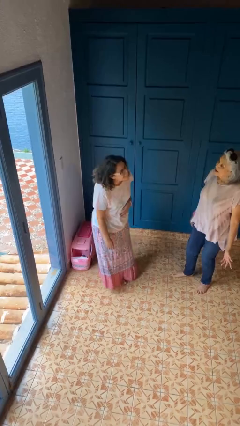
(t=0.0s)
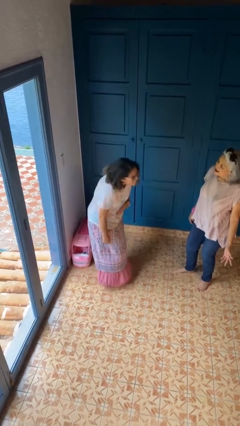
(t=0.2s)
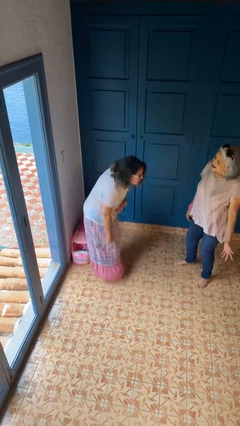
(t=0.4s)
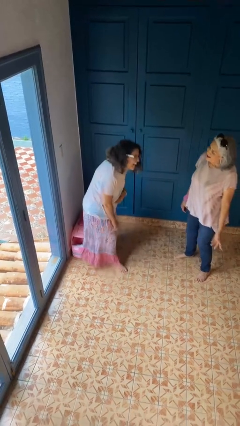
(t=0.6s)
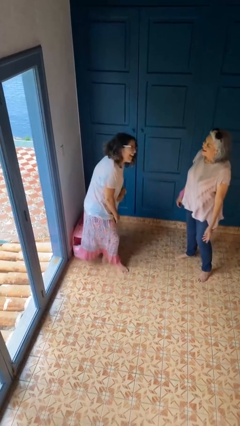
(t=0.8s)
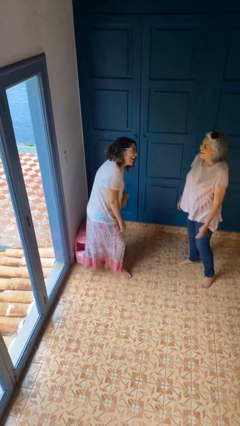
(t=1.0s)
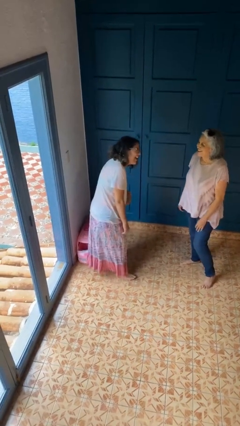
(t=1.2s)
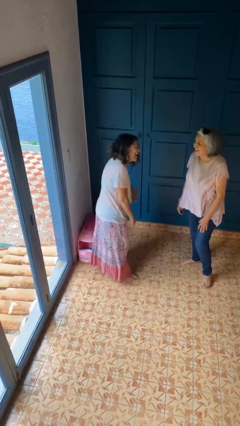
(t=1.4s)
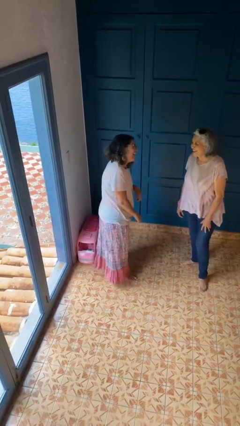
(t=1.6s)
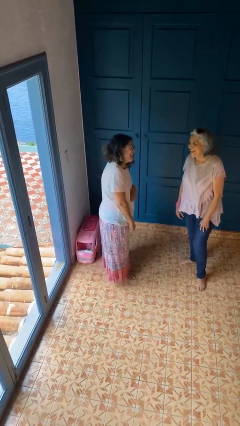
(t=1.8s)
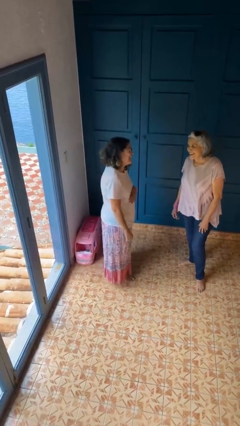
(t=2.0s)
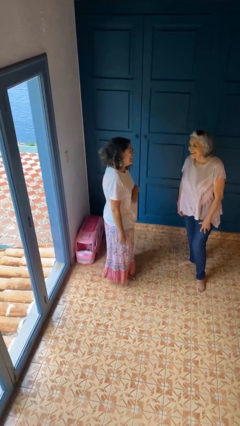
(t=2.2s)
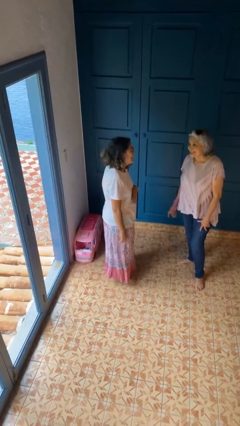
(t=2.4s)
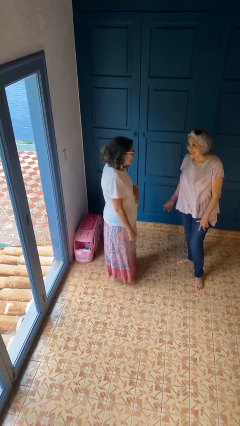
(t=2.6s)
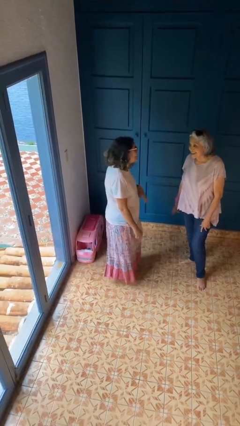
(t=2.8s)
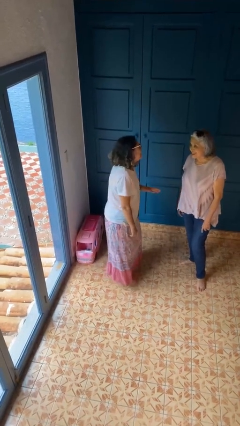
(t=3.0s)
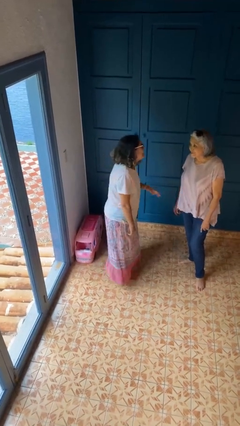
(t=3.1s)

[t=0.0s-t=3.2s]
person laughs with person

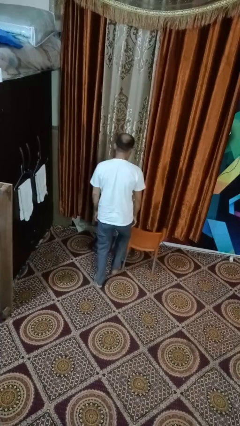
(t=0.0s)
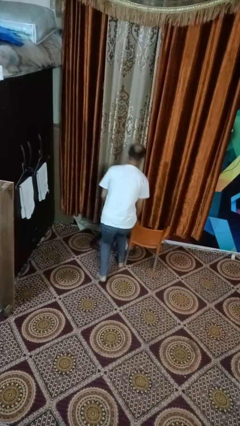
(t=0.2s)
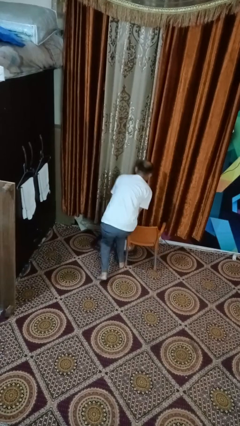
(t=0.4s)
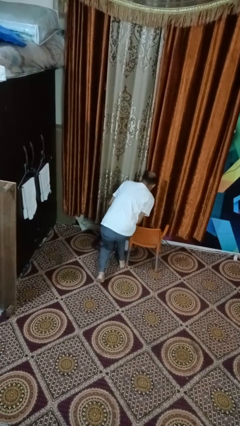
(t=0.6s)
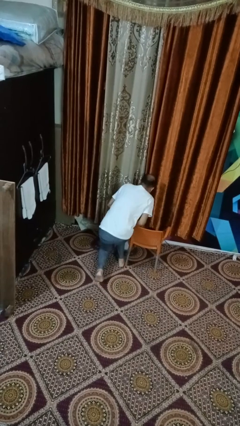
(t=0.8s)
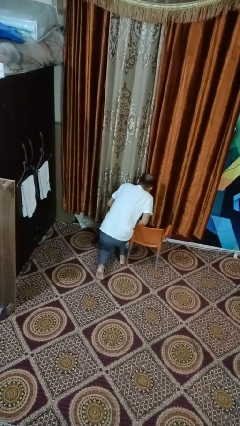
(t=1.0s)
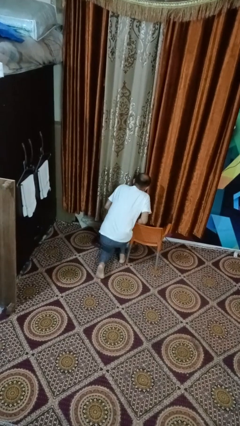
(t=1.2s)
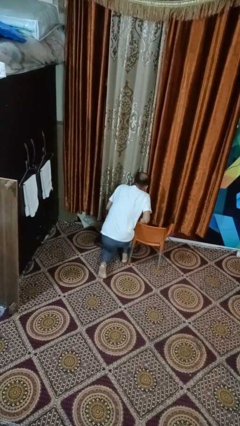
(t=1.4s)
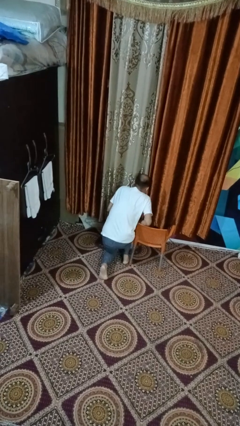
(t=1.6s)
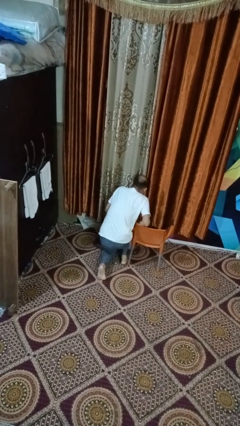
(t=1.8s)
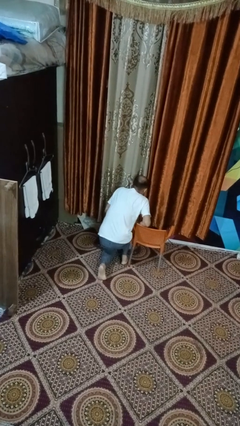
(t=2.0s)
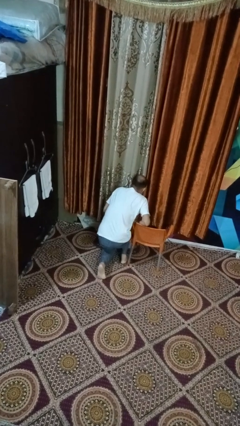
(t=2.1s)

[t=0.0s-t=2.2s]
person trips on object on floor

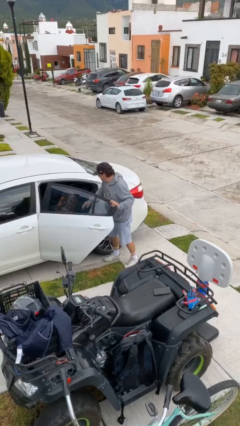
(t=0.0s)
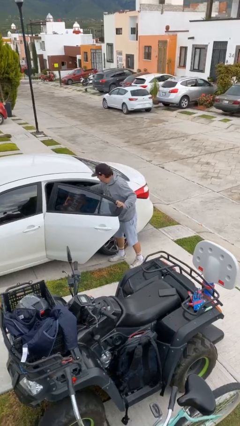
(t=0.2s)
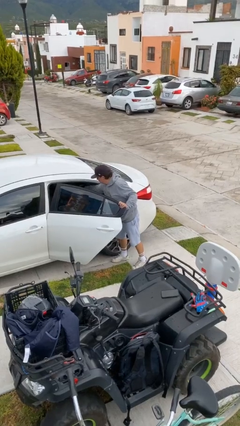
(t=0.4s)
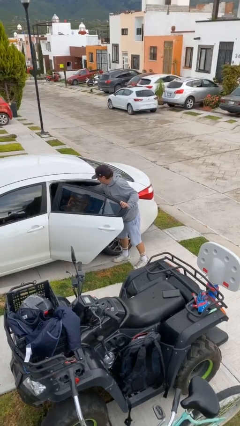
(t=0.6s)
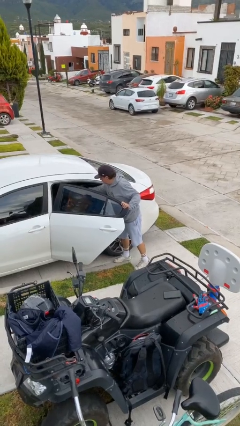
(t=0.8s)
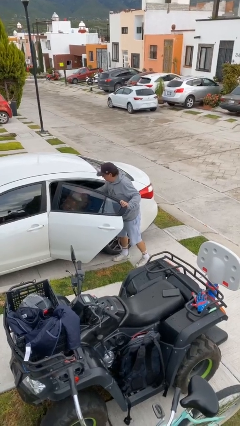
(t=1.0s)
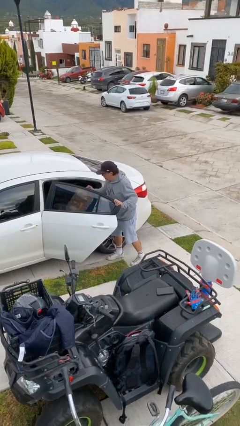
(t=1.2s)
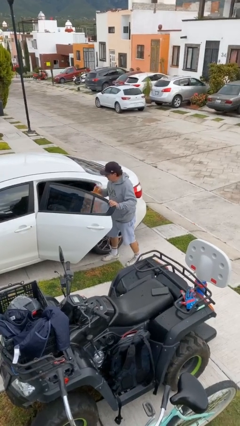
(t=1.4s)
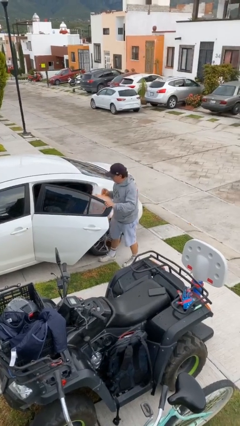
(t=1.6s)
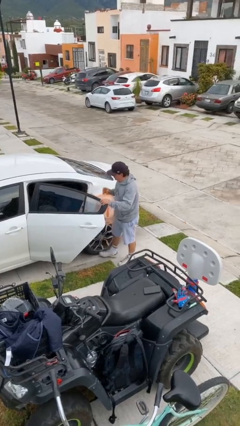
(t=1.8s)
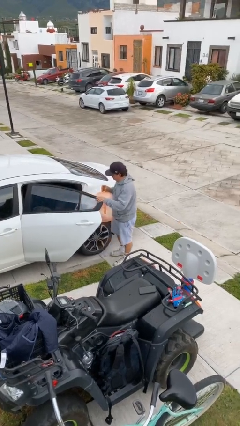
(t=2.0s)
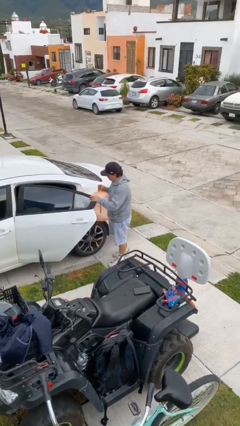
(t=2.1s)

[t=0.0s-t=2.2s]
person unloads car

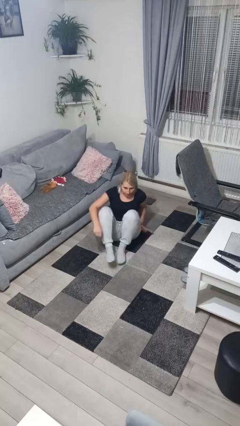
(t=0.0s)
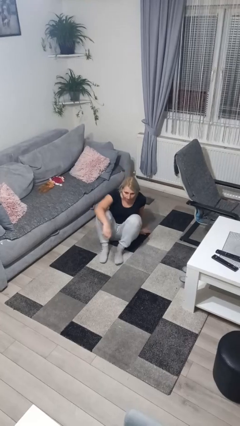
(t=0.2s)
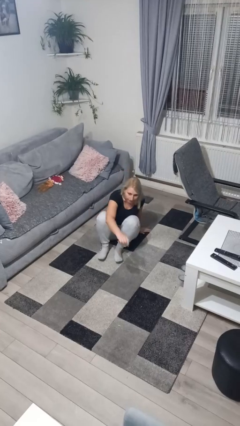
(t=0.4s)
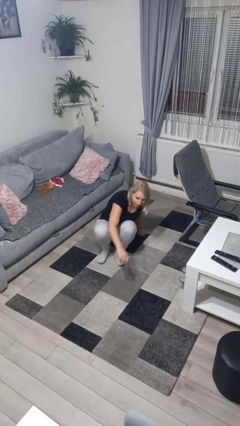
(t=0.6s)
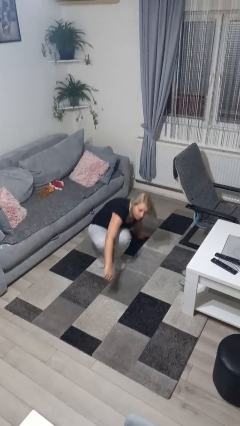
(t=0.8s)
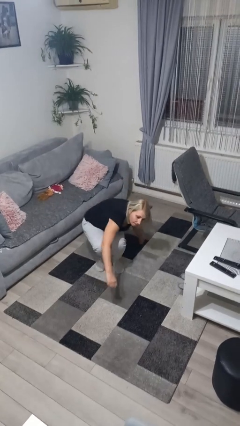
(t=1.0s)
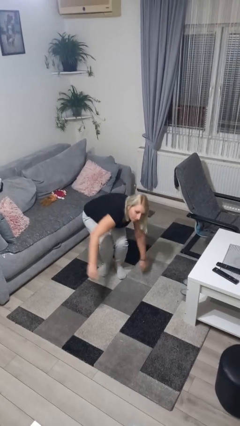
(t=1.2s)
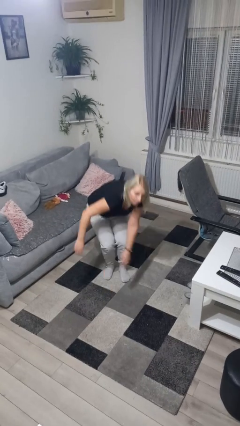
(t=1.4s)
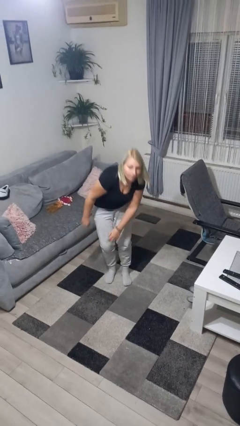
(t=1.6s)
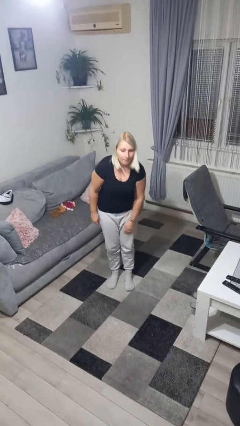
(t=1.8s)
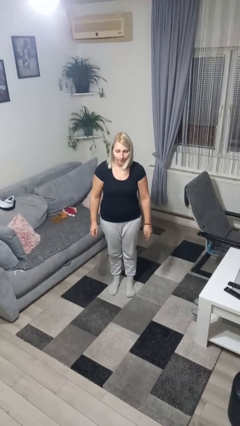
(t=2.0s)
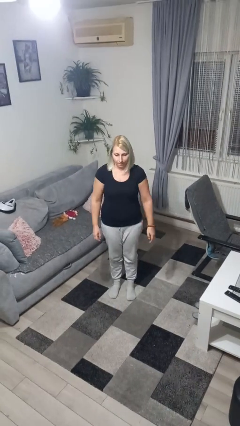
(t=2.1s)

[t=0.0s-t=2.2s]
person stands up from floor

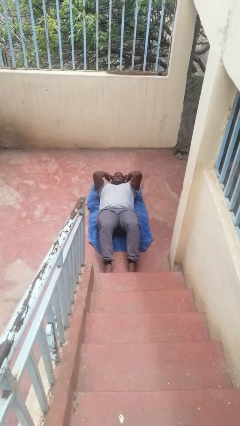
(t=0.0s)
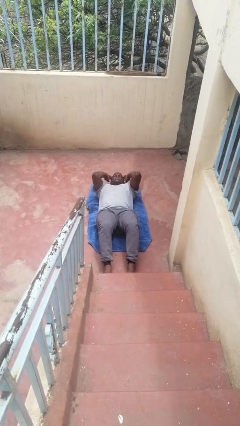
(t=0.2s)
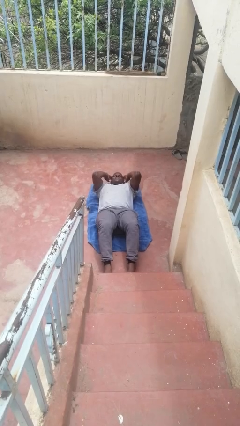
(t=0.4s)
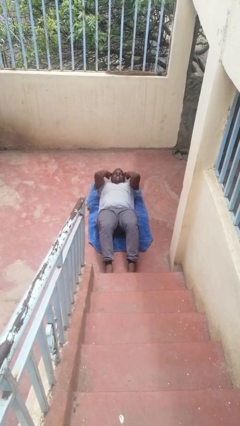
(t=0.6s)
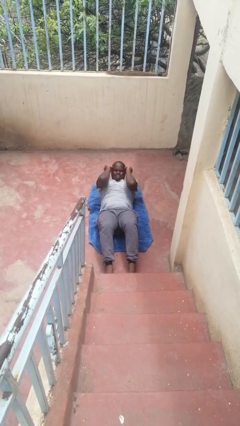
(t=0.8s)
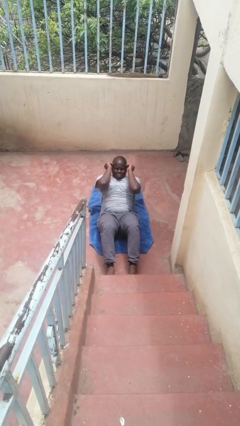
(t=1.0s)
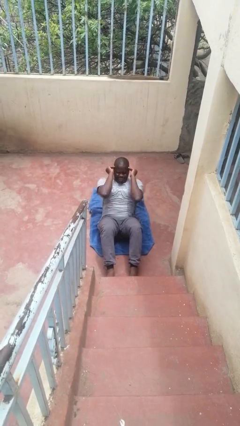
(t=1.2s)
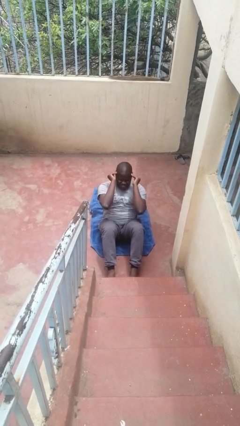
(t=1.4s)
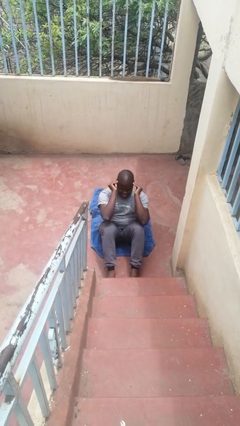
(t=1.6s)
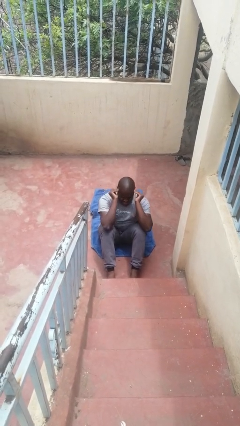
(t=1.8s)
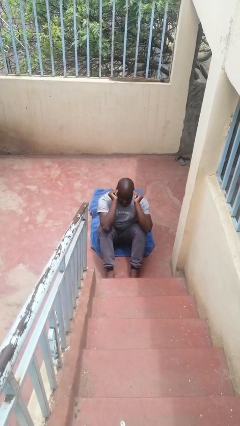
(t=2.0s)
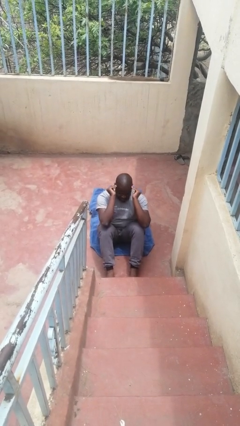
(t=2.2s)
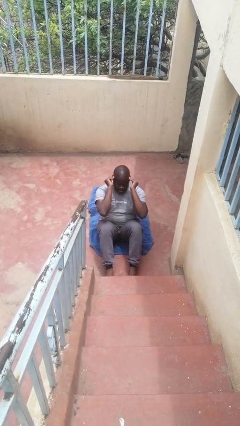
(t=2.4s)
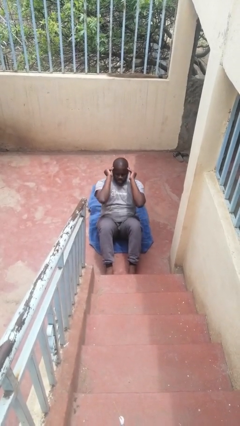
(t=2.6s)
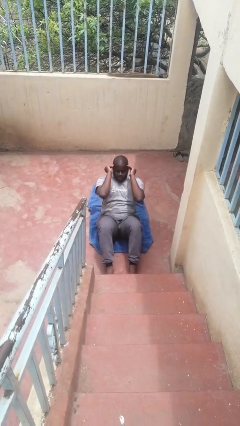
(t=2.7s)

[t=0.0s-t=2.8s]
person exercises with situp

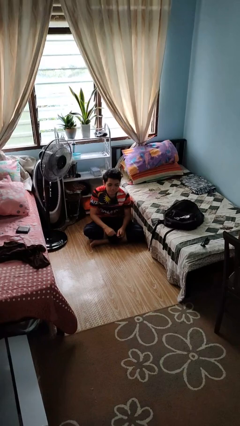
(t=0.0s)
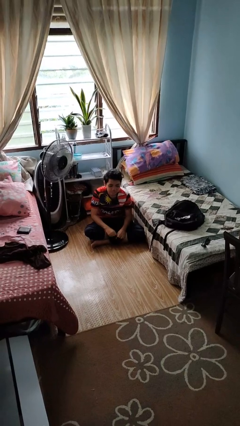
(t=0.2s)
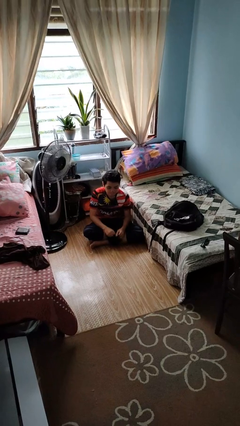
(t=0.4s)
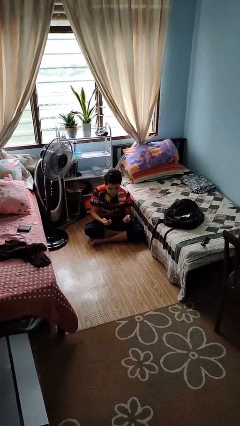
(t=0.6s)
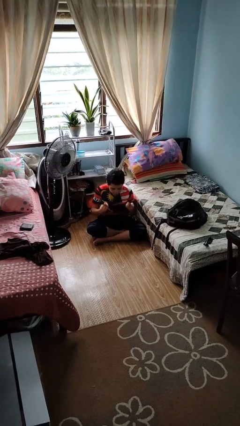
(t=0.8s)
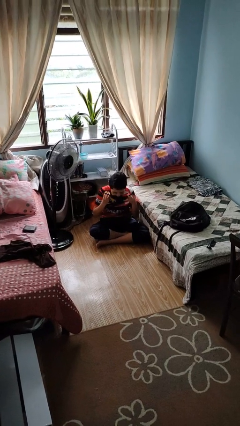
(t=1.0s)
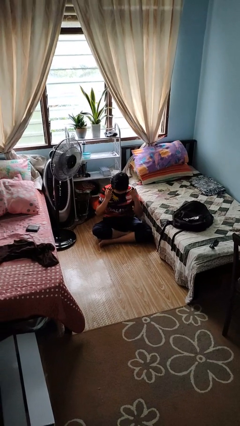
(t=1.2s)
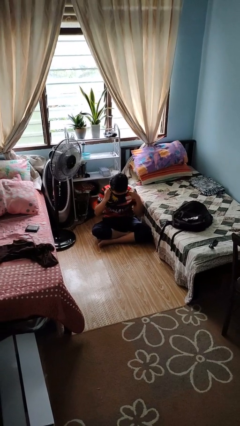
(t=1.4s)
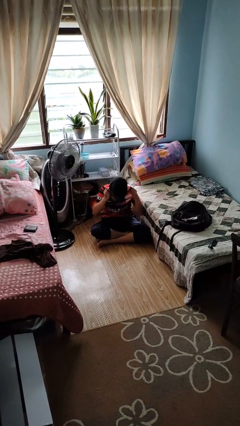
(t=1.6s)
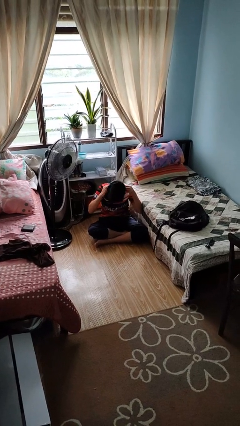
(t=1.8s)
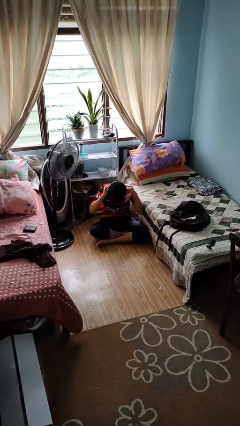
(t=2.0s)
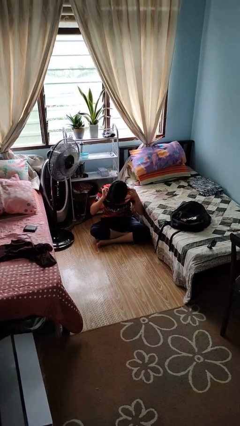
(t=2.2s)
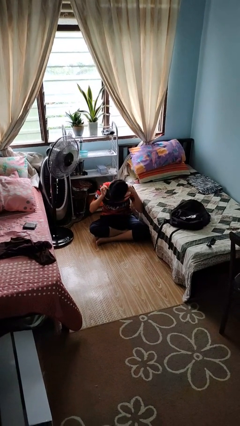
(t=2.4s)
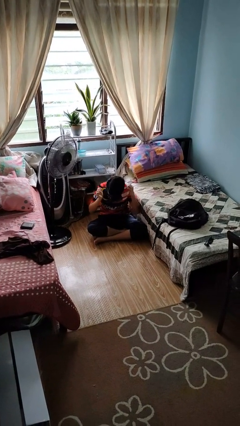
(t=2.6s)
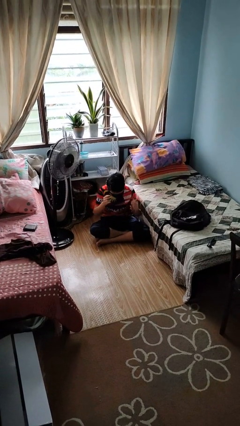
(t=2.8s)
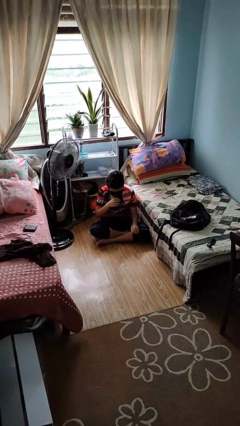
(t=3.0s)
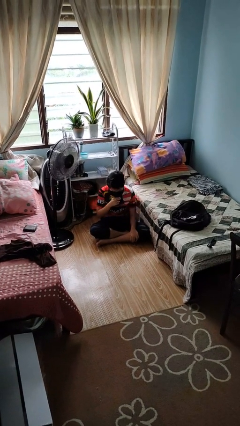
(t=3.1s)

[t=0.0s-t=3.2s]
person puts on facemask

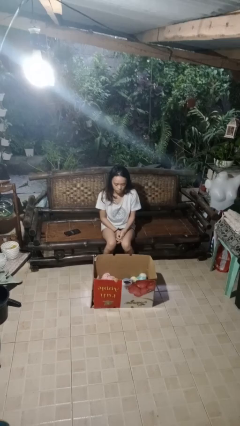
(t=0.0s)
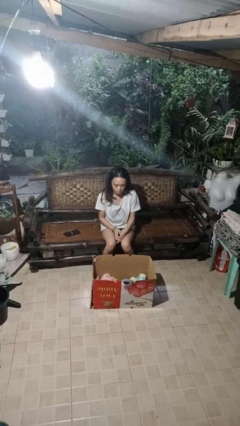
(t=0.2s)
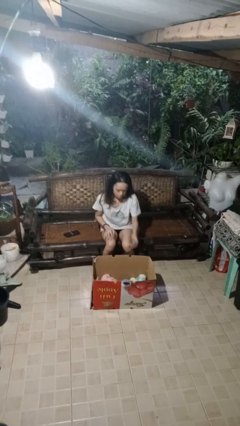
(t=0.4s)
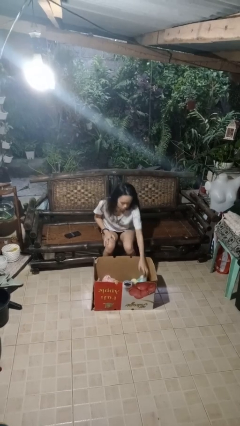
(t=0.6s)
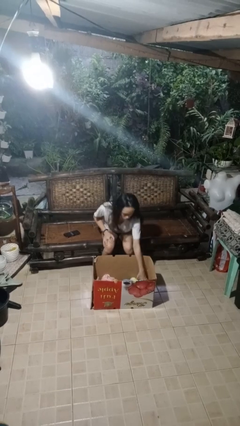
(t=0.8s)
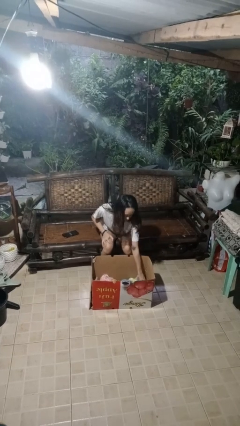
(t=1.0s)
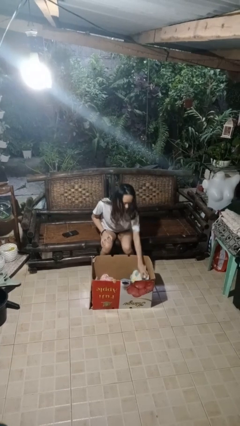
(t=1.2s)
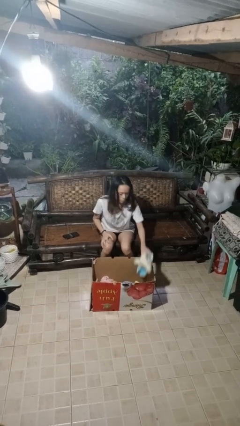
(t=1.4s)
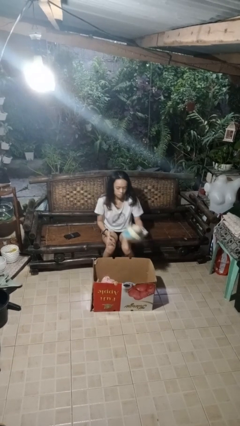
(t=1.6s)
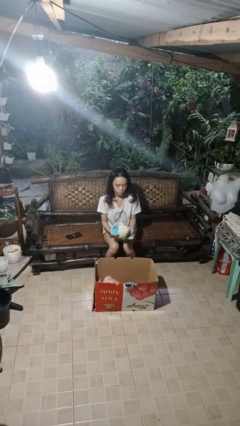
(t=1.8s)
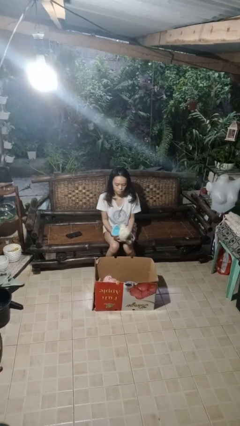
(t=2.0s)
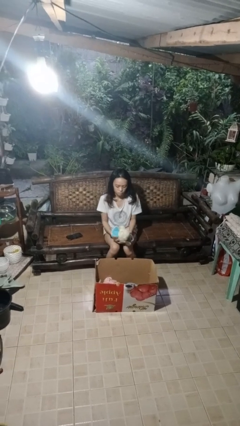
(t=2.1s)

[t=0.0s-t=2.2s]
person takes object from box
